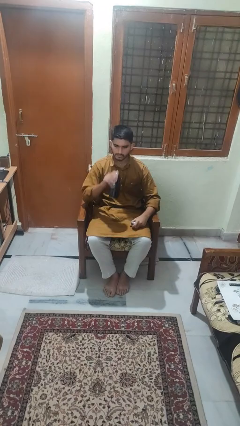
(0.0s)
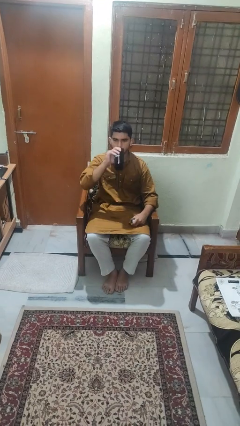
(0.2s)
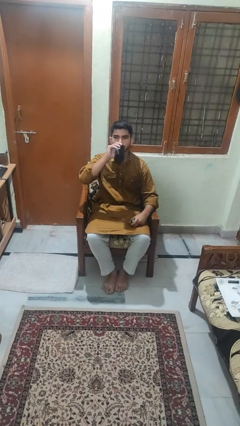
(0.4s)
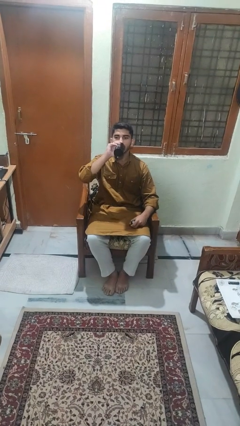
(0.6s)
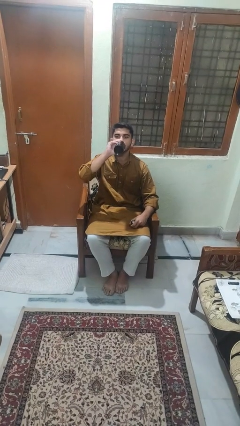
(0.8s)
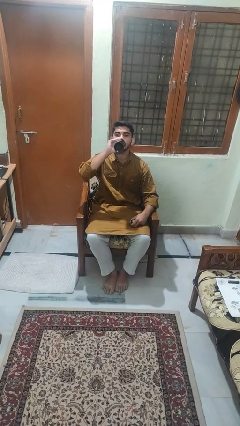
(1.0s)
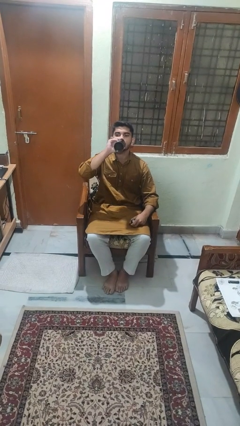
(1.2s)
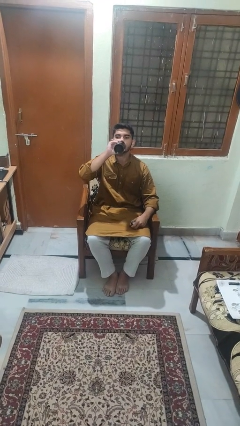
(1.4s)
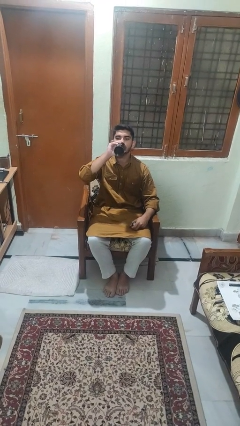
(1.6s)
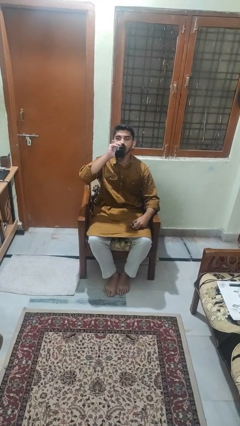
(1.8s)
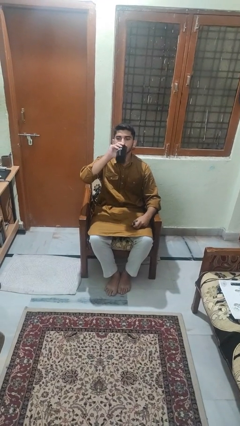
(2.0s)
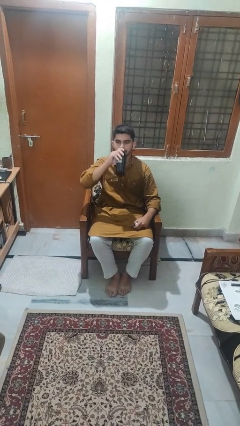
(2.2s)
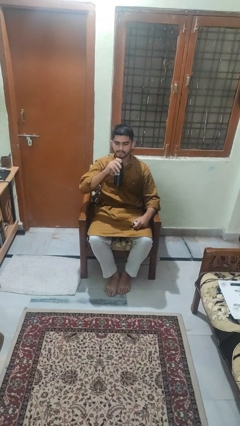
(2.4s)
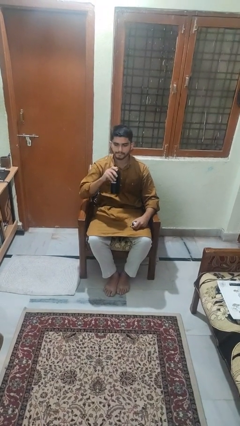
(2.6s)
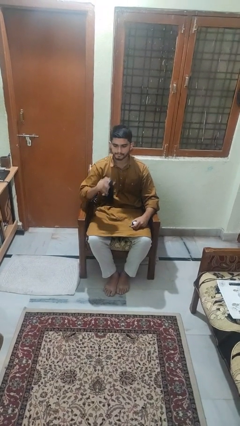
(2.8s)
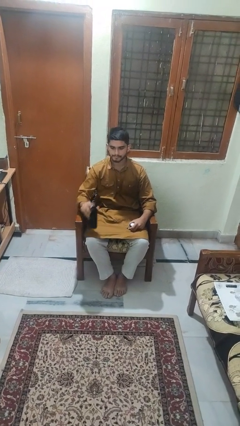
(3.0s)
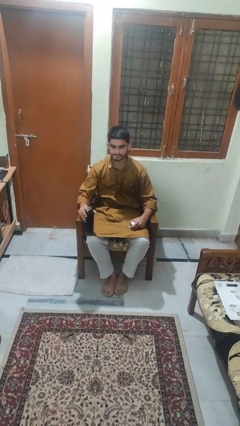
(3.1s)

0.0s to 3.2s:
person drinks from bottle

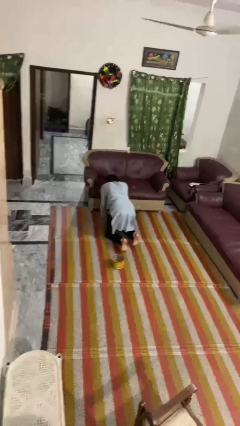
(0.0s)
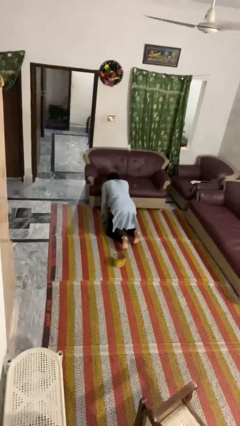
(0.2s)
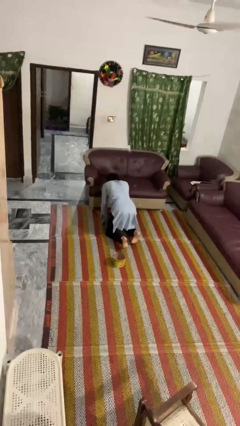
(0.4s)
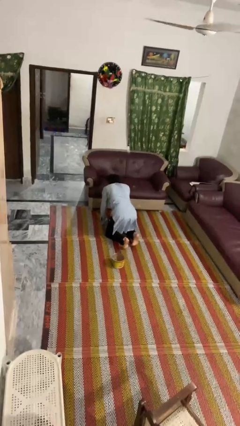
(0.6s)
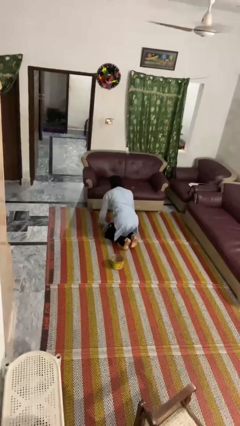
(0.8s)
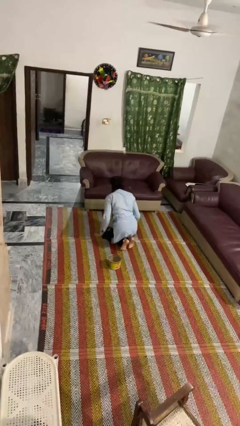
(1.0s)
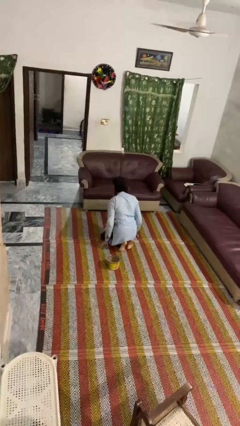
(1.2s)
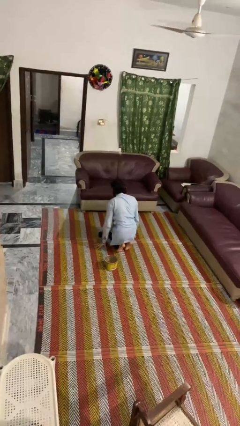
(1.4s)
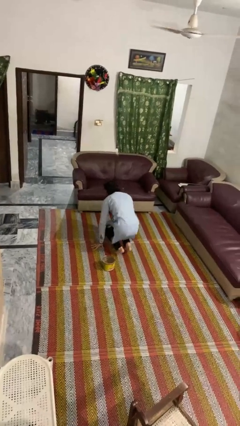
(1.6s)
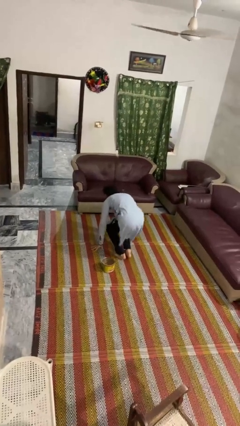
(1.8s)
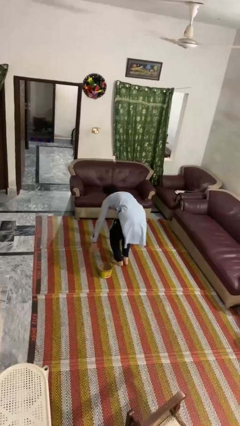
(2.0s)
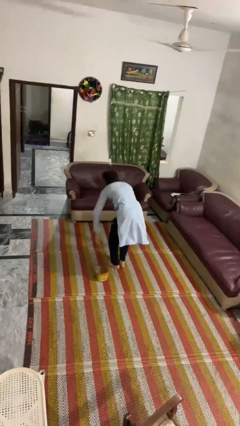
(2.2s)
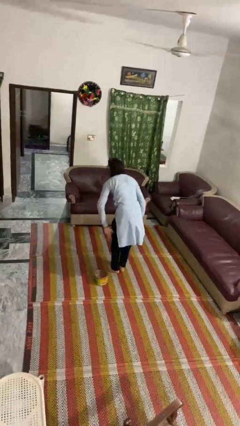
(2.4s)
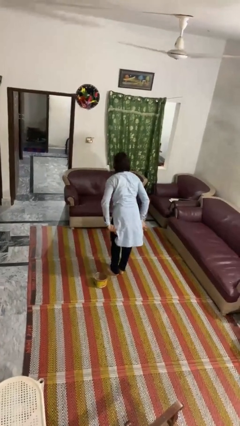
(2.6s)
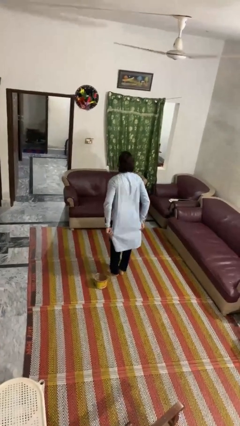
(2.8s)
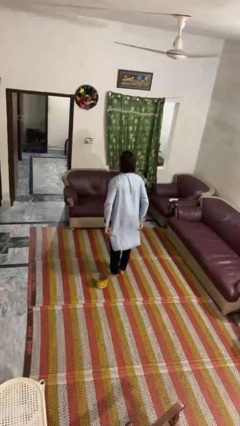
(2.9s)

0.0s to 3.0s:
person stands up from floor

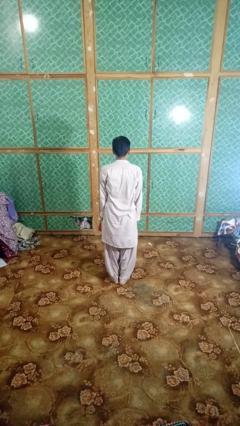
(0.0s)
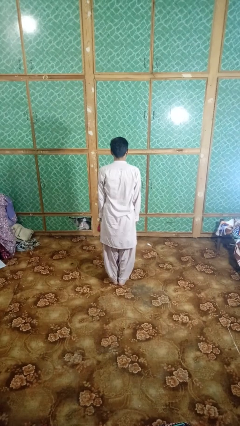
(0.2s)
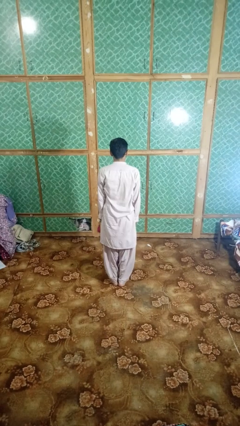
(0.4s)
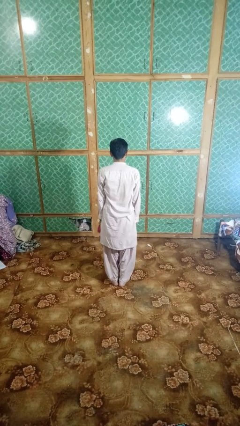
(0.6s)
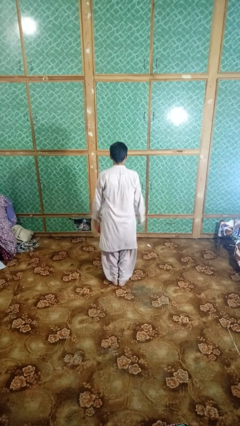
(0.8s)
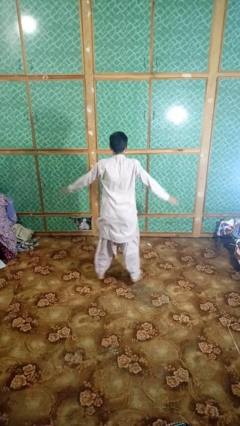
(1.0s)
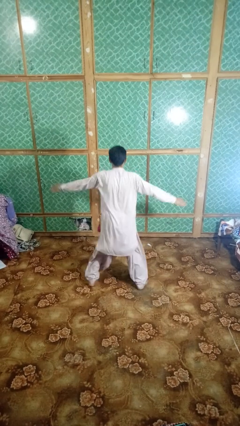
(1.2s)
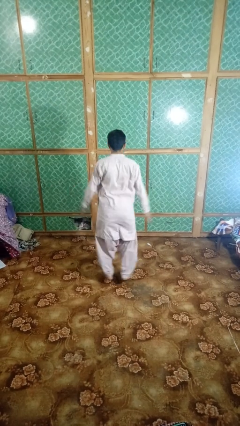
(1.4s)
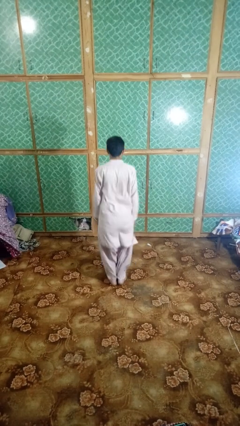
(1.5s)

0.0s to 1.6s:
person exercises with jumping jacks

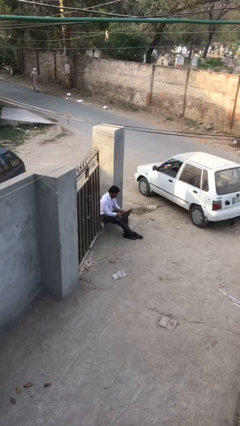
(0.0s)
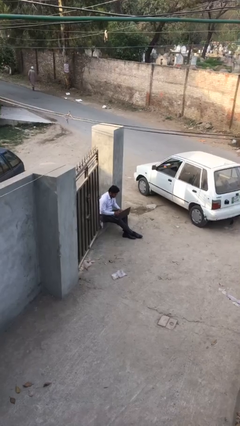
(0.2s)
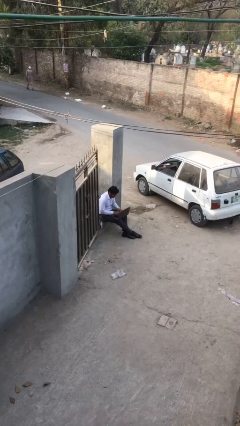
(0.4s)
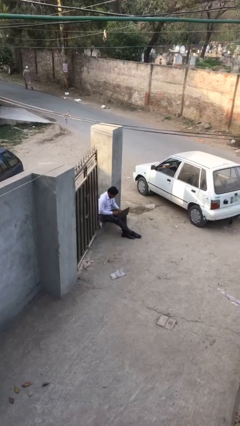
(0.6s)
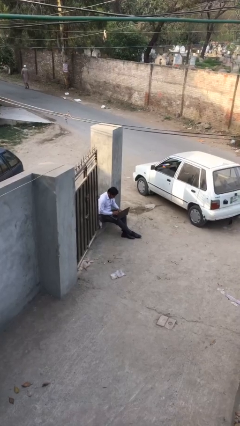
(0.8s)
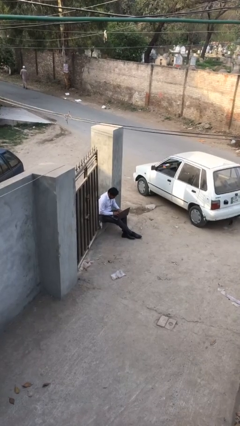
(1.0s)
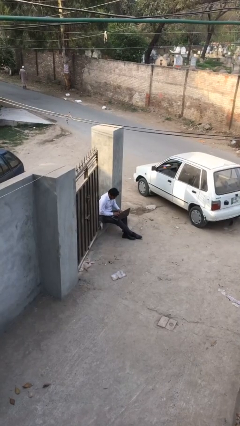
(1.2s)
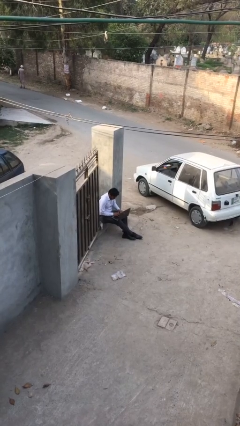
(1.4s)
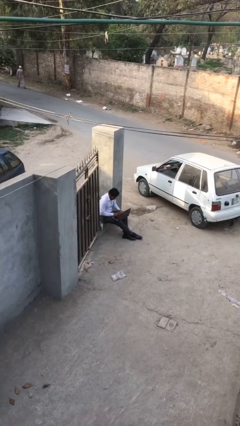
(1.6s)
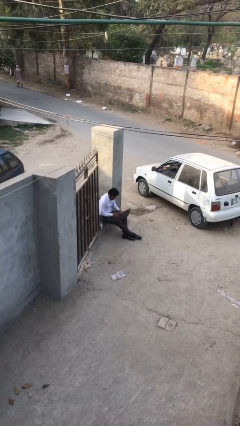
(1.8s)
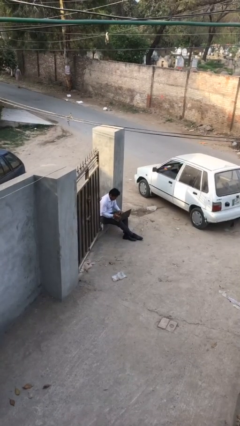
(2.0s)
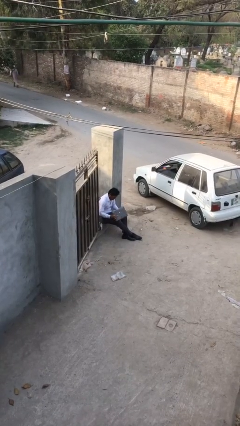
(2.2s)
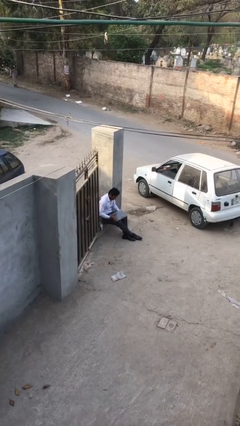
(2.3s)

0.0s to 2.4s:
person interacts with laptop

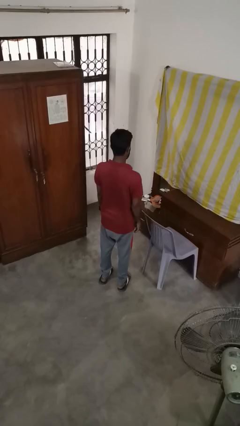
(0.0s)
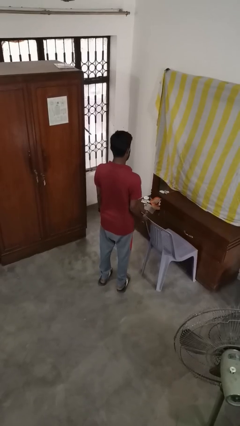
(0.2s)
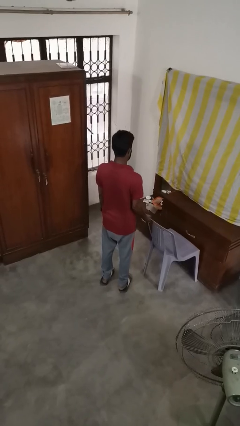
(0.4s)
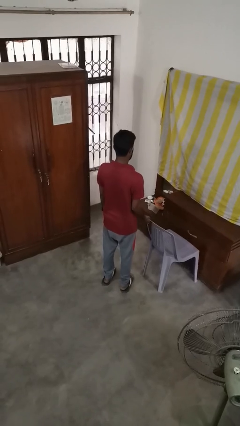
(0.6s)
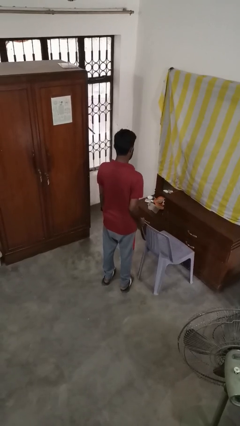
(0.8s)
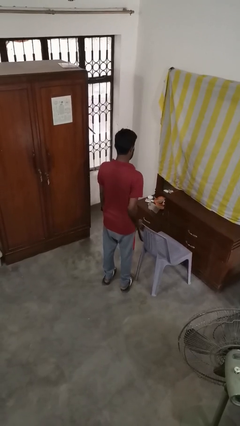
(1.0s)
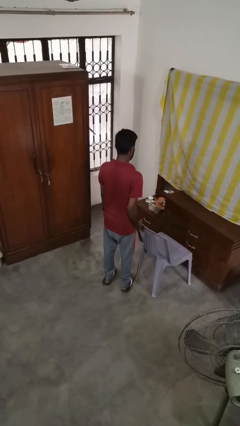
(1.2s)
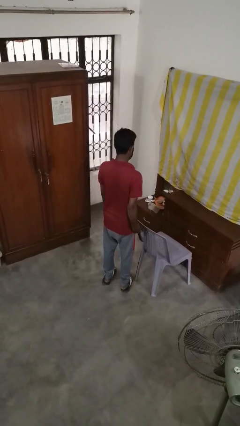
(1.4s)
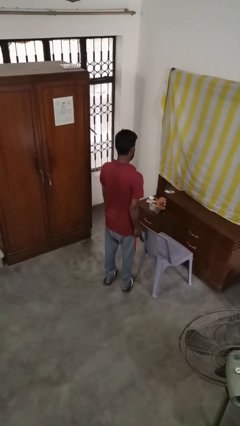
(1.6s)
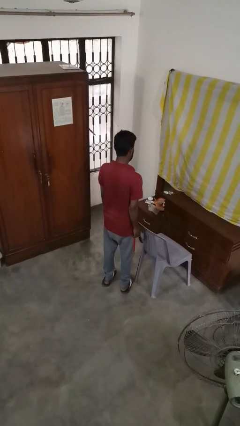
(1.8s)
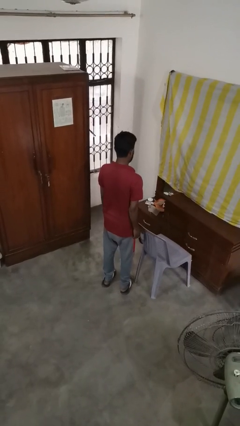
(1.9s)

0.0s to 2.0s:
person pulls out chair

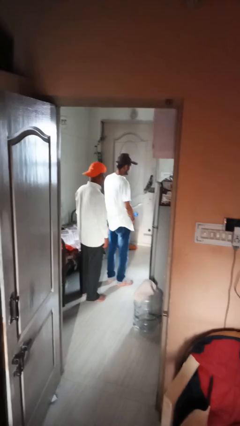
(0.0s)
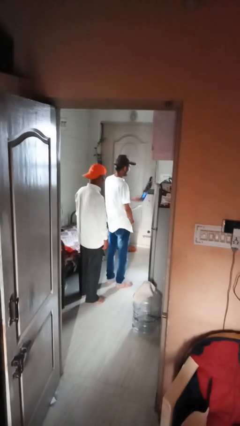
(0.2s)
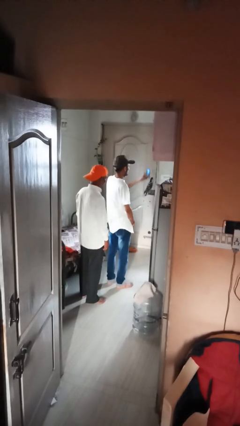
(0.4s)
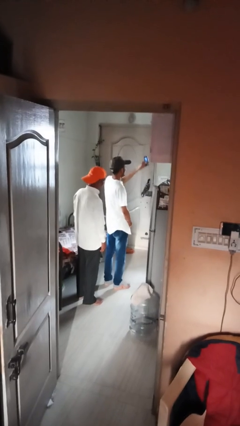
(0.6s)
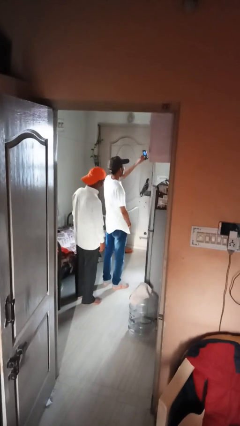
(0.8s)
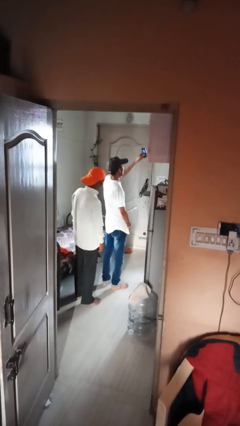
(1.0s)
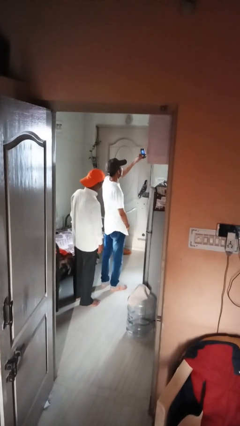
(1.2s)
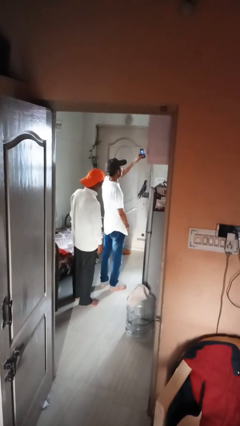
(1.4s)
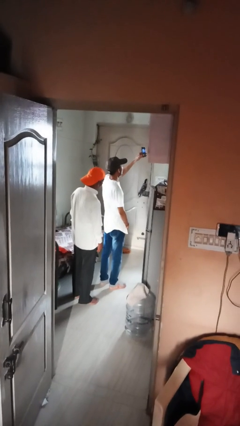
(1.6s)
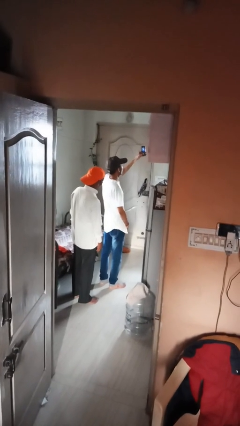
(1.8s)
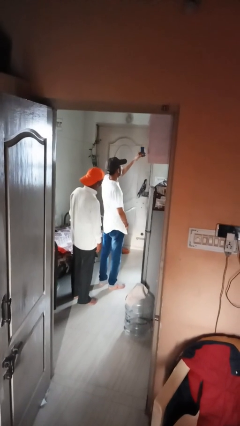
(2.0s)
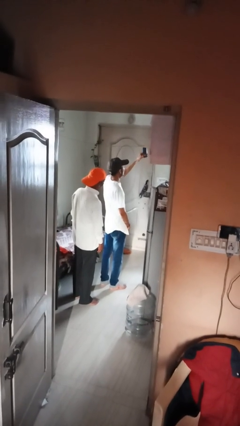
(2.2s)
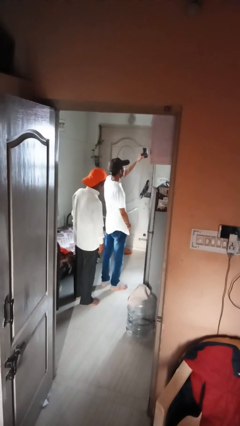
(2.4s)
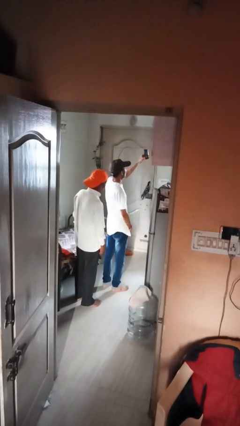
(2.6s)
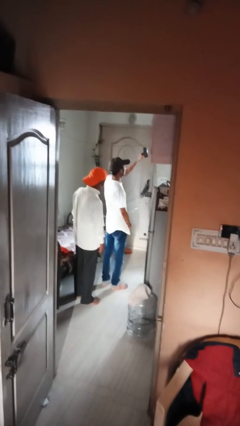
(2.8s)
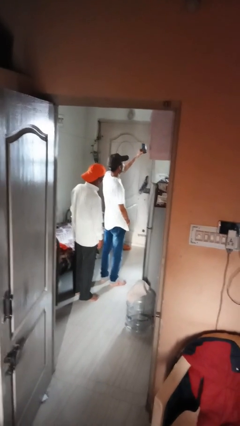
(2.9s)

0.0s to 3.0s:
person takes selfie with person

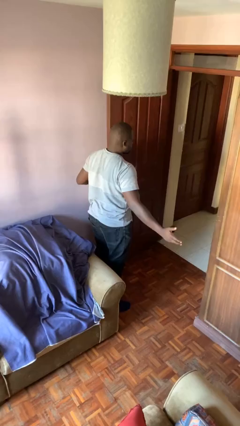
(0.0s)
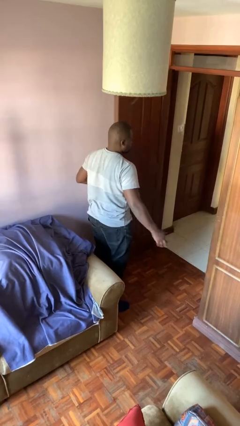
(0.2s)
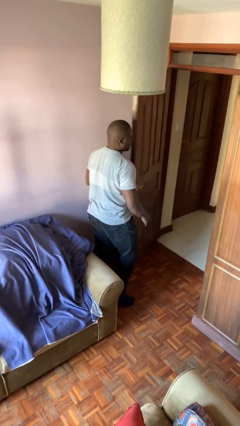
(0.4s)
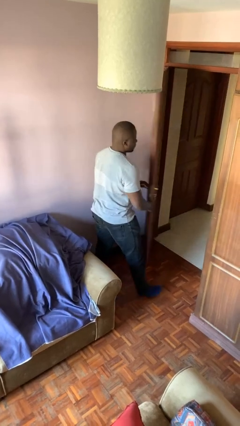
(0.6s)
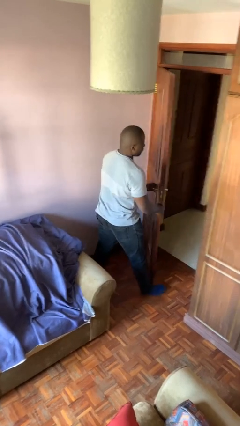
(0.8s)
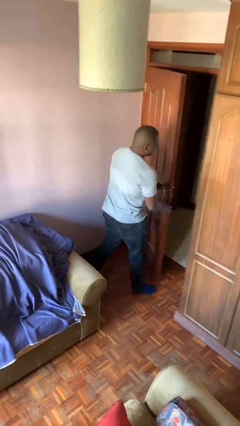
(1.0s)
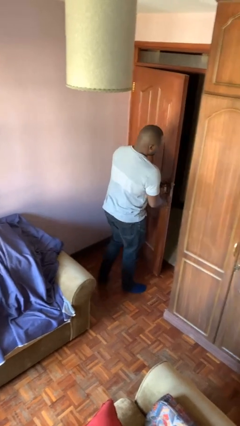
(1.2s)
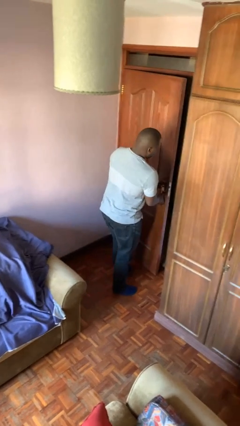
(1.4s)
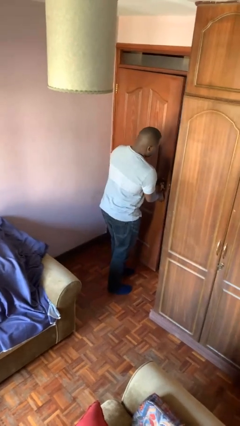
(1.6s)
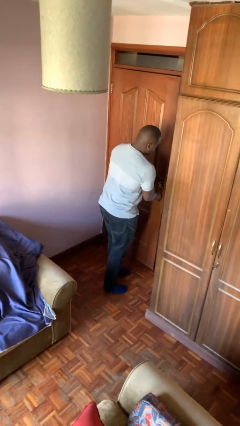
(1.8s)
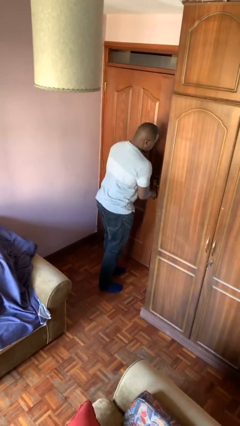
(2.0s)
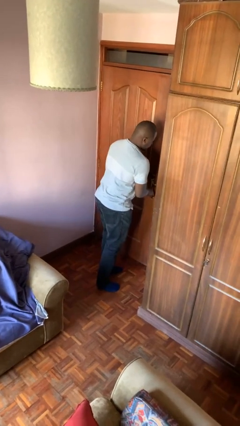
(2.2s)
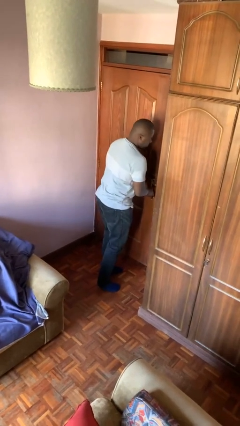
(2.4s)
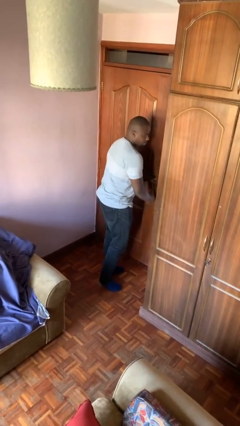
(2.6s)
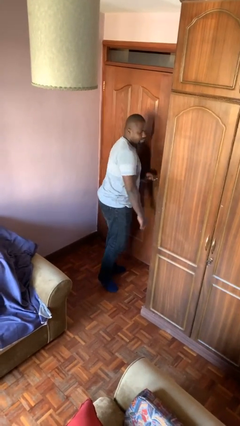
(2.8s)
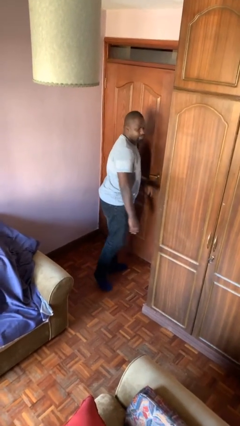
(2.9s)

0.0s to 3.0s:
person closes facility door
